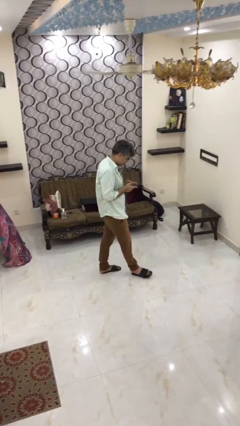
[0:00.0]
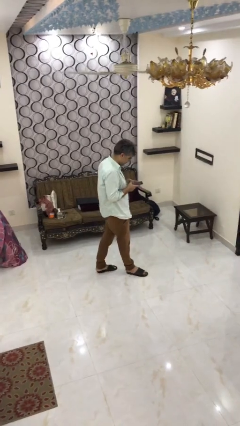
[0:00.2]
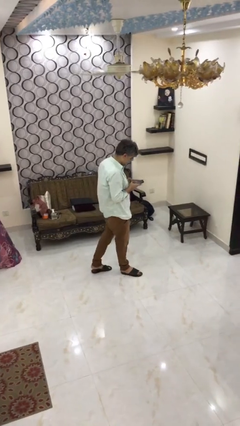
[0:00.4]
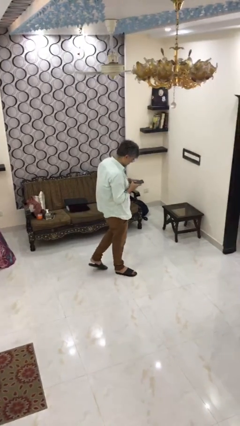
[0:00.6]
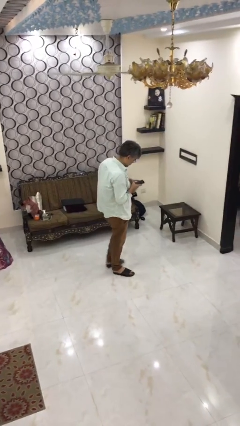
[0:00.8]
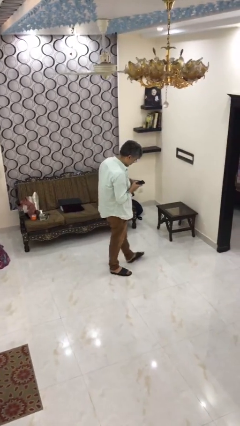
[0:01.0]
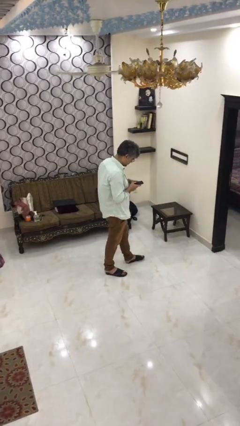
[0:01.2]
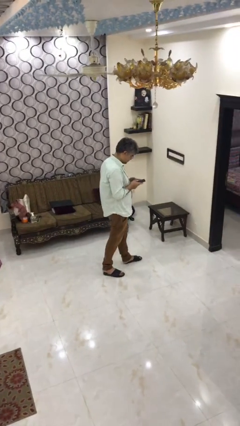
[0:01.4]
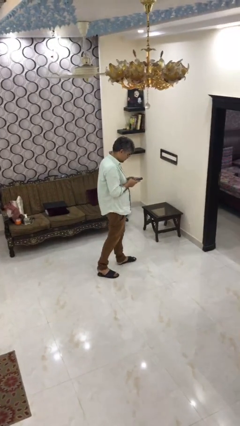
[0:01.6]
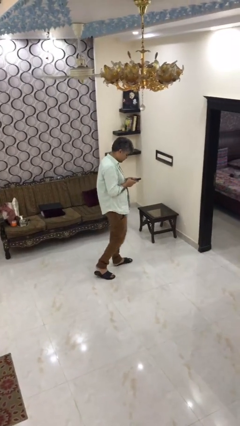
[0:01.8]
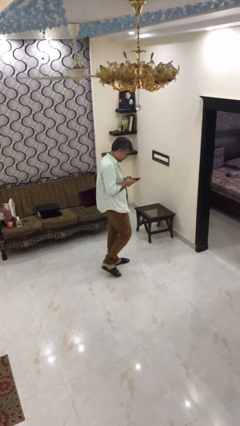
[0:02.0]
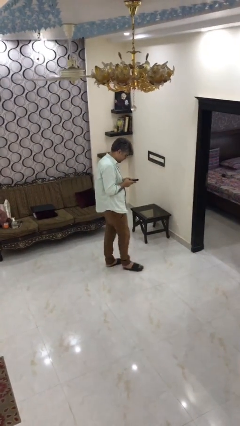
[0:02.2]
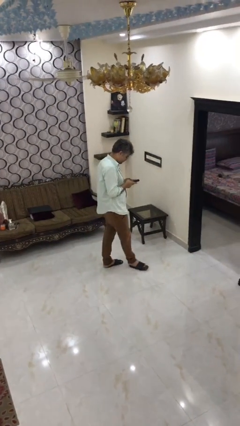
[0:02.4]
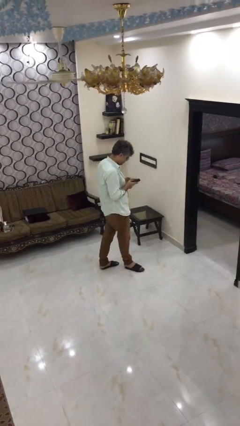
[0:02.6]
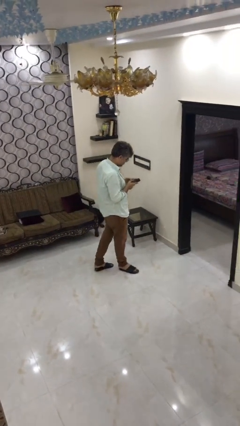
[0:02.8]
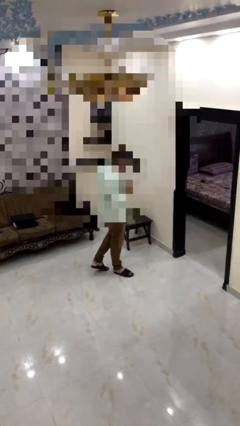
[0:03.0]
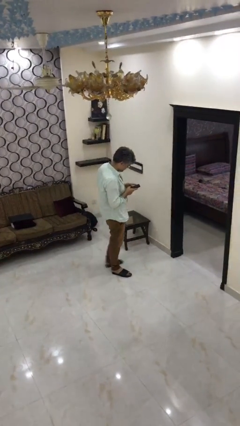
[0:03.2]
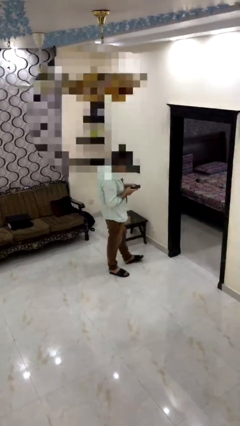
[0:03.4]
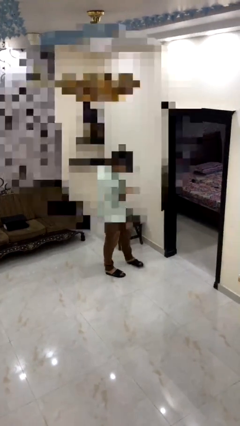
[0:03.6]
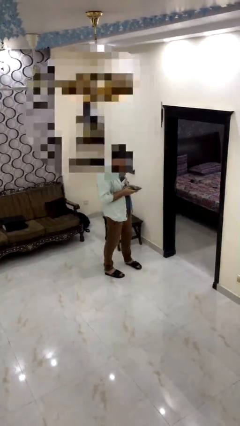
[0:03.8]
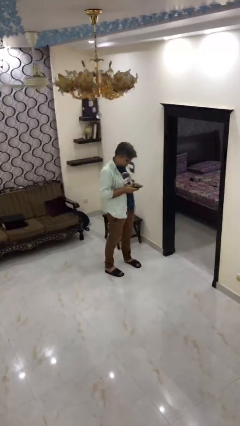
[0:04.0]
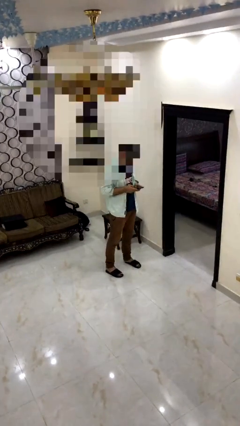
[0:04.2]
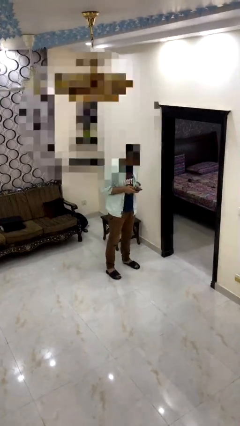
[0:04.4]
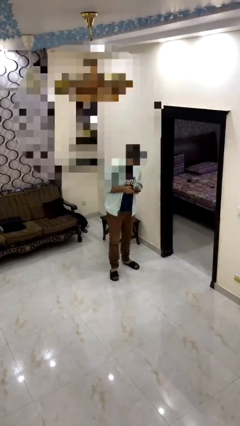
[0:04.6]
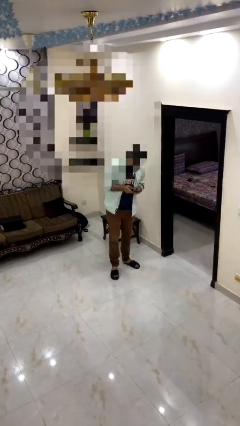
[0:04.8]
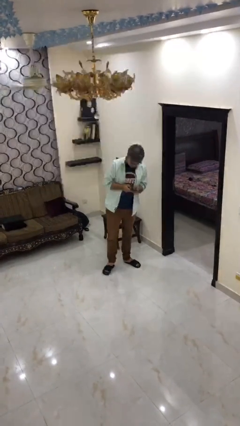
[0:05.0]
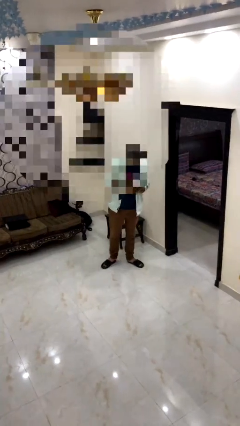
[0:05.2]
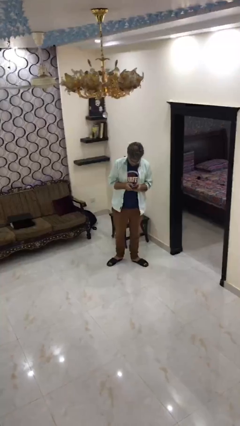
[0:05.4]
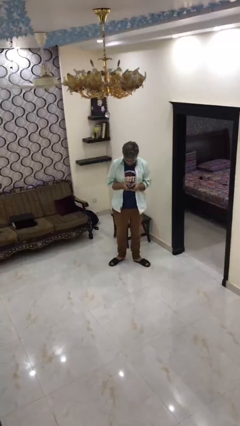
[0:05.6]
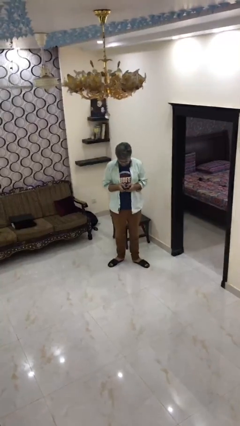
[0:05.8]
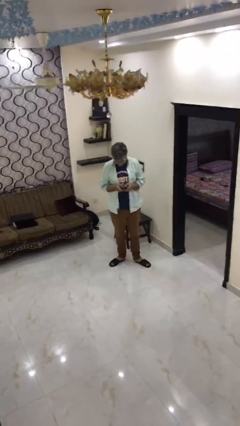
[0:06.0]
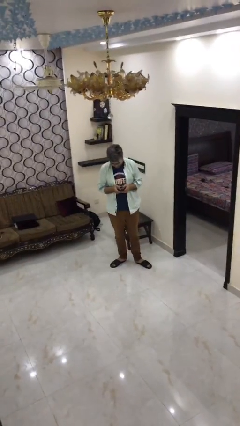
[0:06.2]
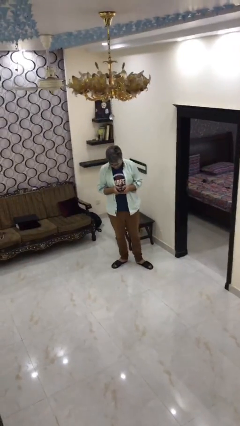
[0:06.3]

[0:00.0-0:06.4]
person texts on phone

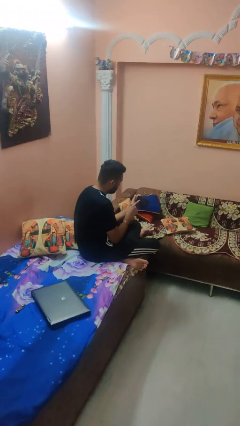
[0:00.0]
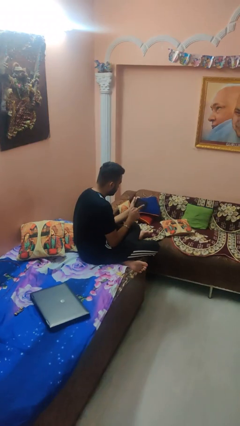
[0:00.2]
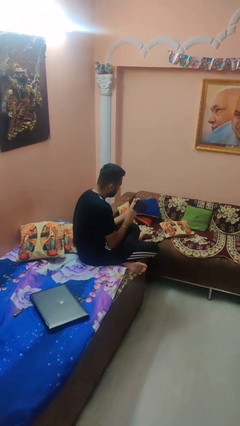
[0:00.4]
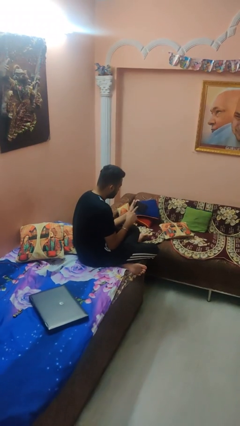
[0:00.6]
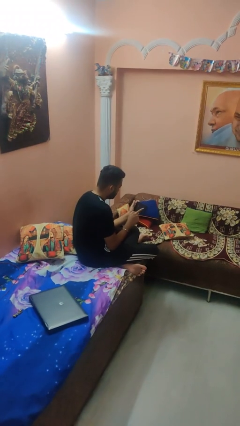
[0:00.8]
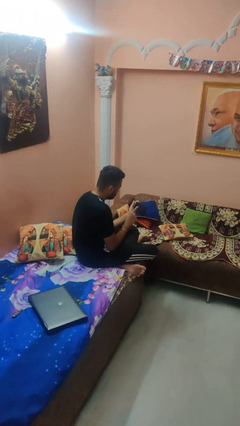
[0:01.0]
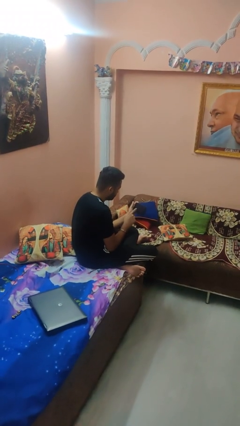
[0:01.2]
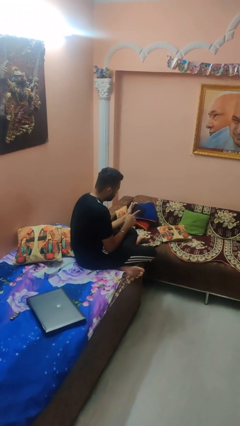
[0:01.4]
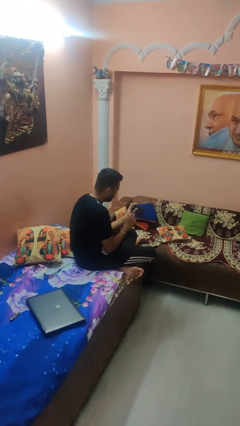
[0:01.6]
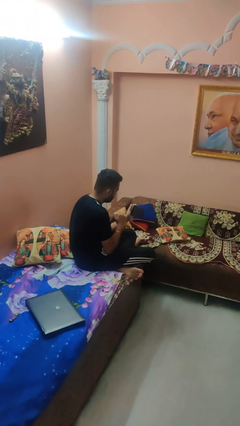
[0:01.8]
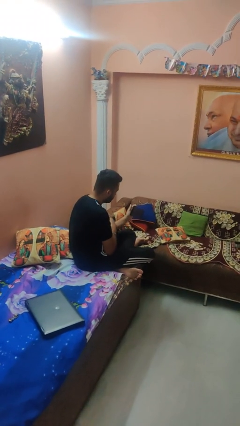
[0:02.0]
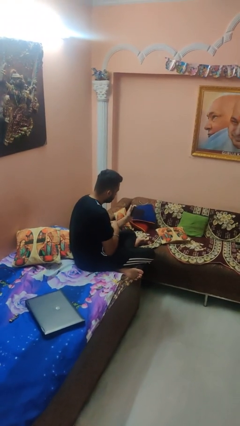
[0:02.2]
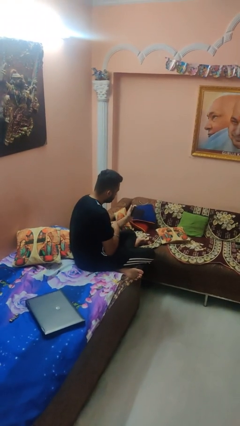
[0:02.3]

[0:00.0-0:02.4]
person interacts with tablet

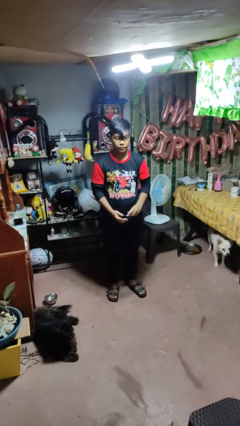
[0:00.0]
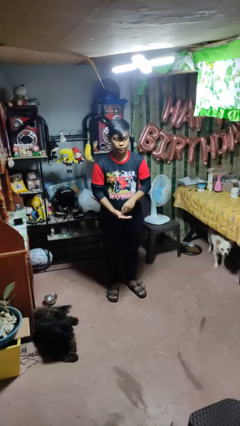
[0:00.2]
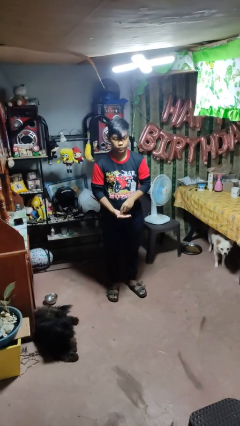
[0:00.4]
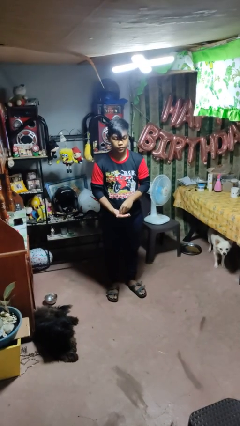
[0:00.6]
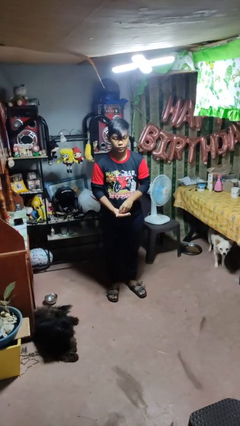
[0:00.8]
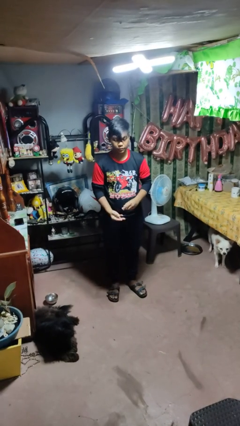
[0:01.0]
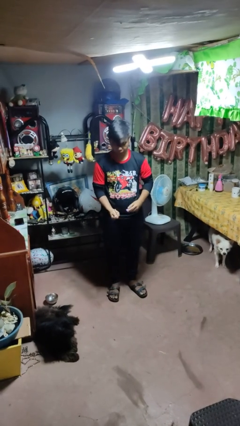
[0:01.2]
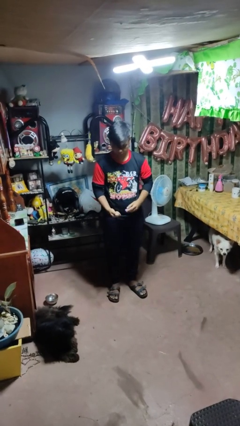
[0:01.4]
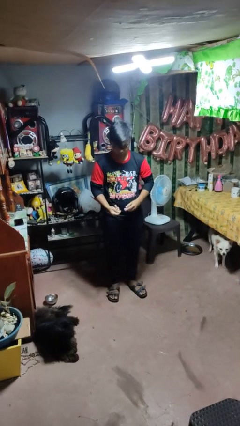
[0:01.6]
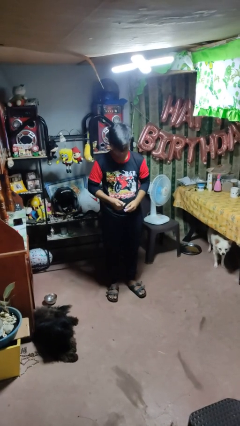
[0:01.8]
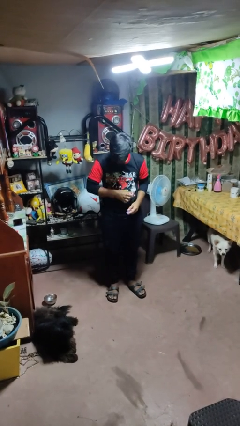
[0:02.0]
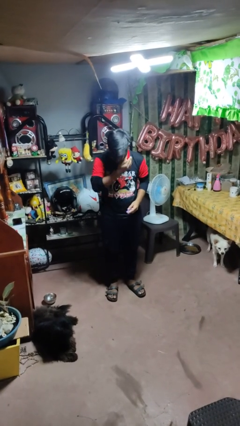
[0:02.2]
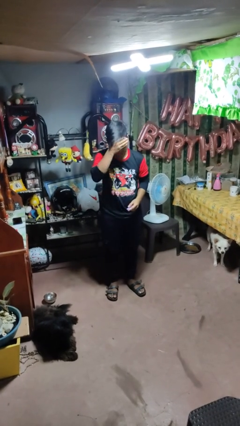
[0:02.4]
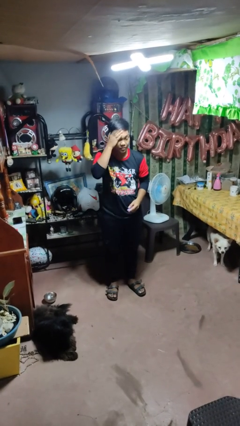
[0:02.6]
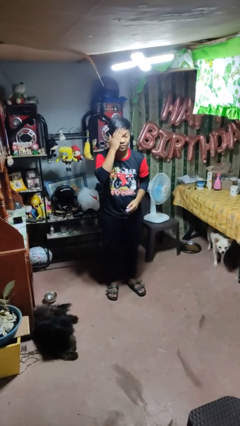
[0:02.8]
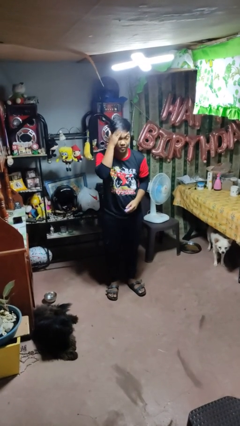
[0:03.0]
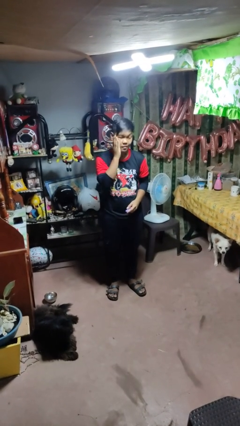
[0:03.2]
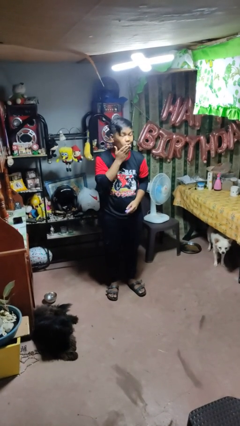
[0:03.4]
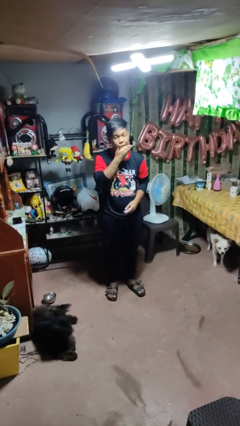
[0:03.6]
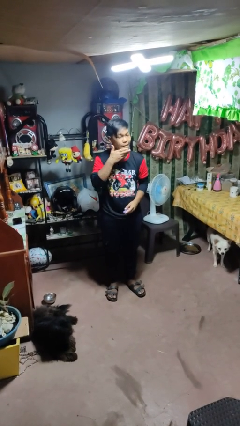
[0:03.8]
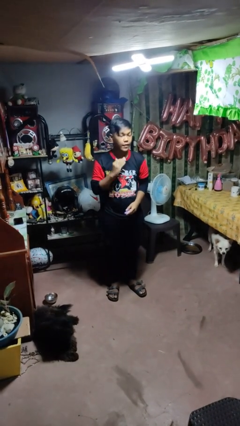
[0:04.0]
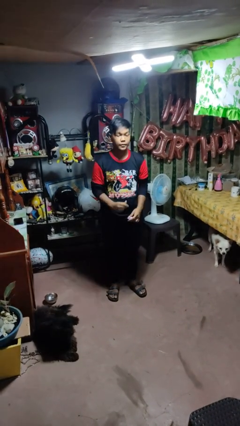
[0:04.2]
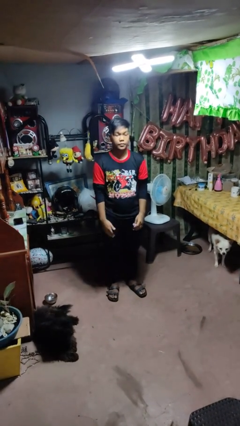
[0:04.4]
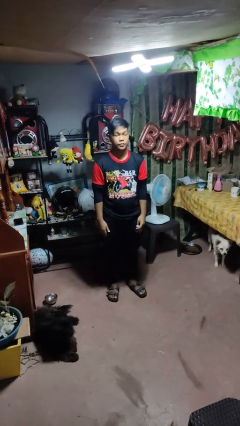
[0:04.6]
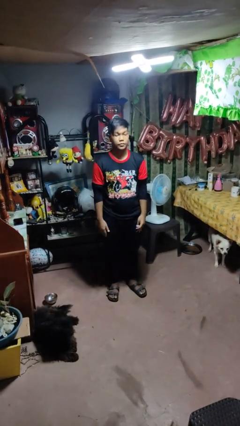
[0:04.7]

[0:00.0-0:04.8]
person applies facial moisturizer

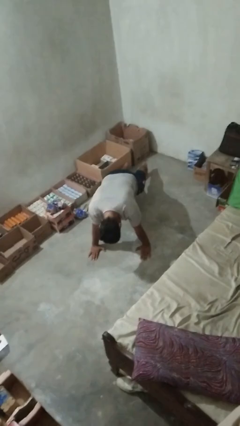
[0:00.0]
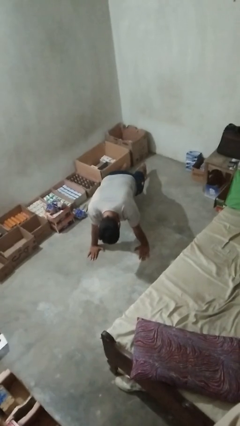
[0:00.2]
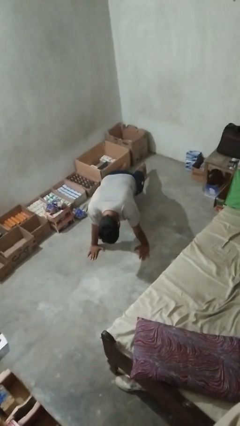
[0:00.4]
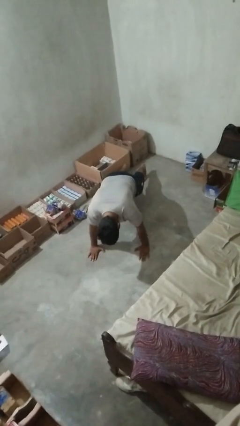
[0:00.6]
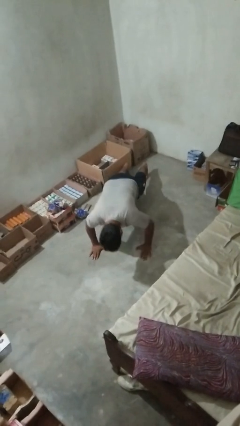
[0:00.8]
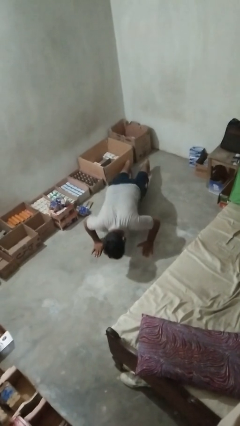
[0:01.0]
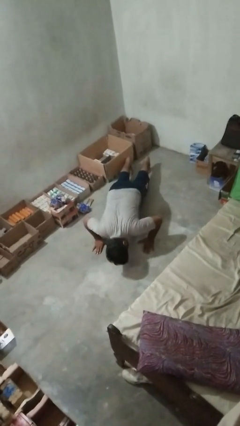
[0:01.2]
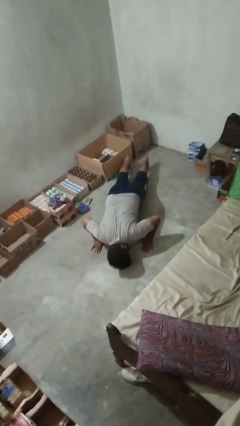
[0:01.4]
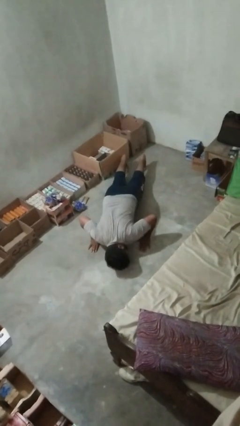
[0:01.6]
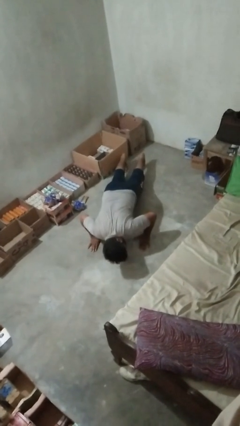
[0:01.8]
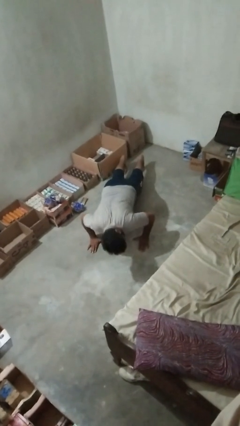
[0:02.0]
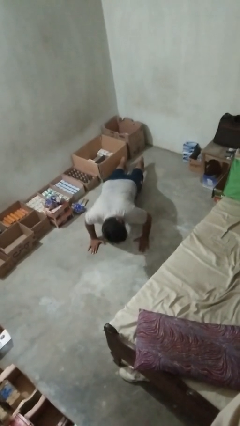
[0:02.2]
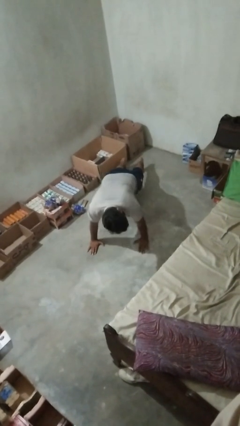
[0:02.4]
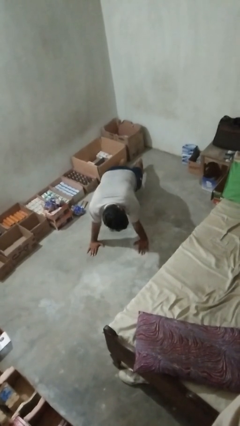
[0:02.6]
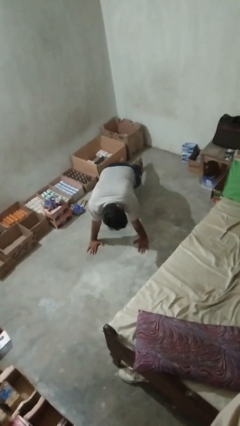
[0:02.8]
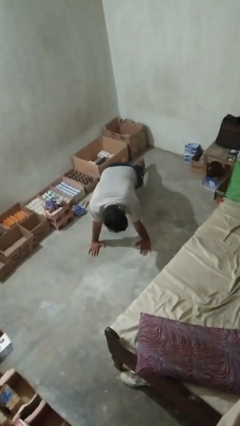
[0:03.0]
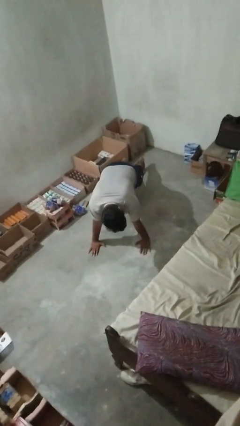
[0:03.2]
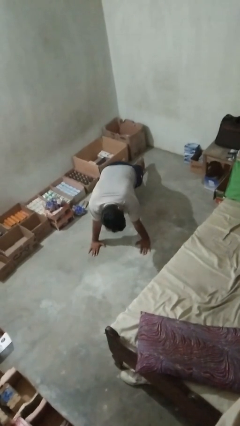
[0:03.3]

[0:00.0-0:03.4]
person exercises with pushup

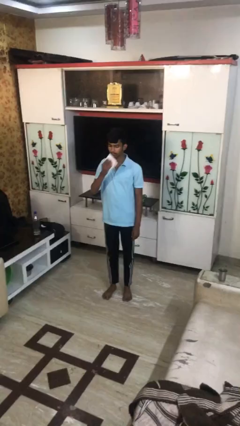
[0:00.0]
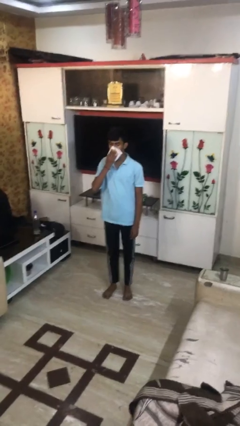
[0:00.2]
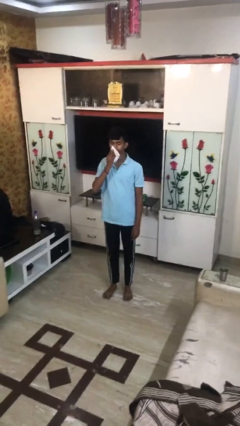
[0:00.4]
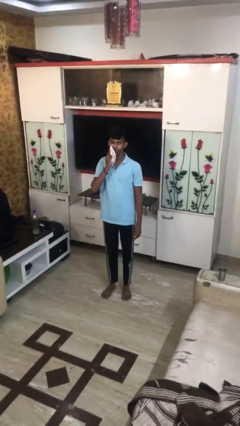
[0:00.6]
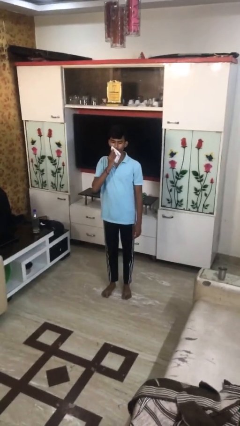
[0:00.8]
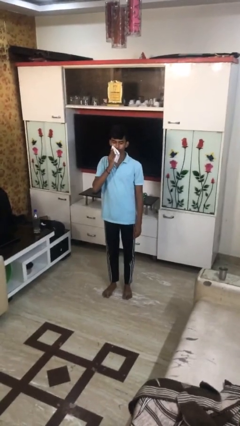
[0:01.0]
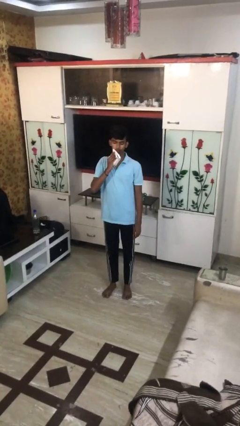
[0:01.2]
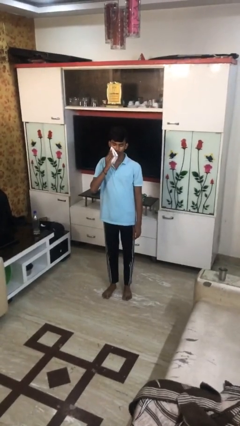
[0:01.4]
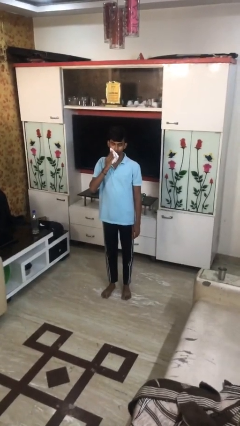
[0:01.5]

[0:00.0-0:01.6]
person wipes mouth with napkin
